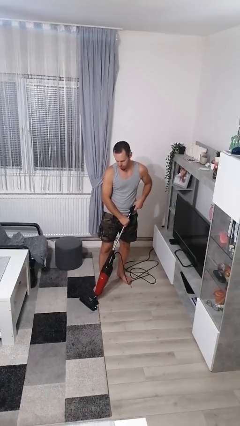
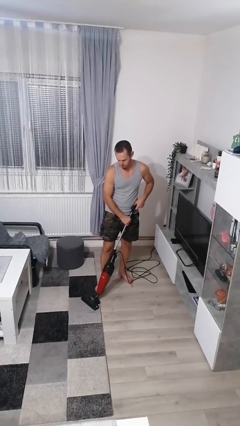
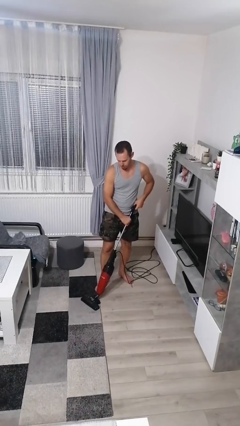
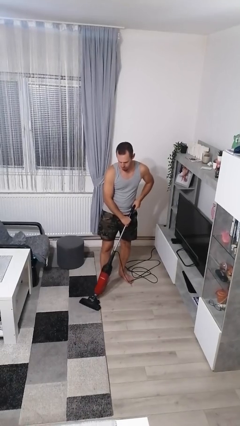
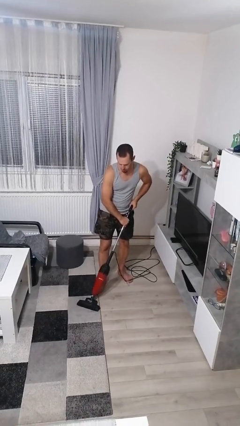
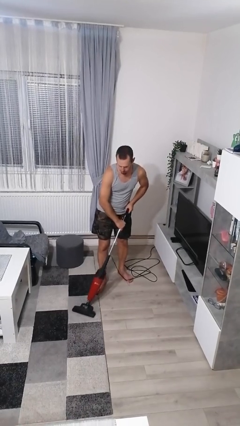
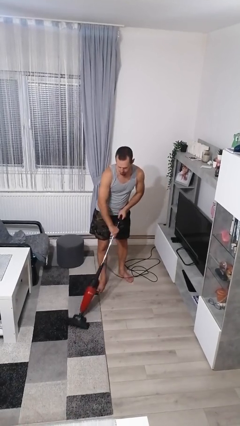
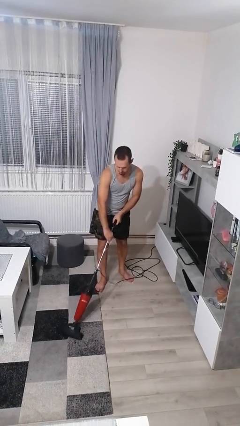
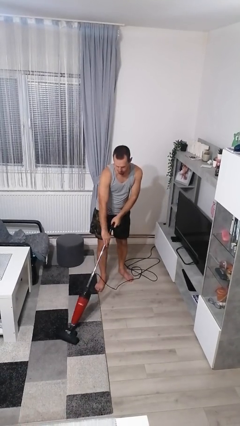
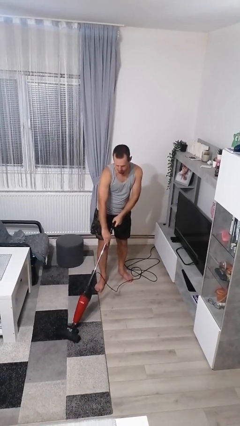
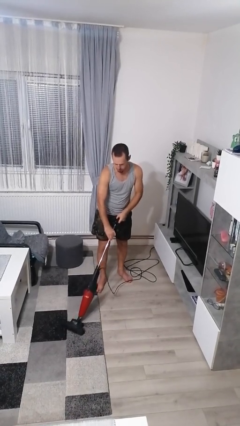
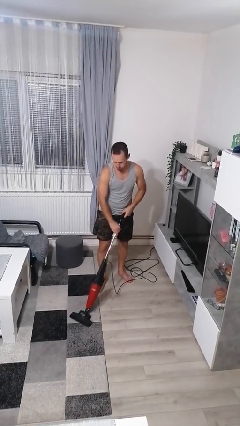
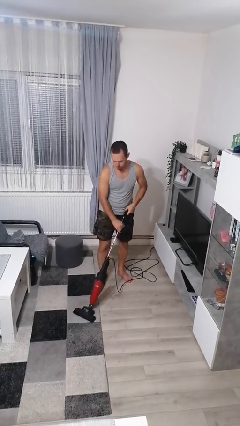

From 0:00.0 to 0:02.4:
person vacuums carpet

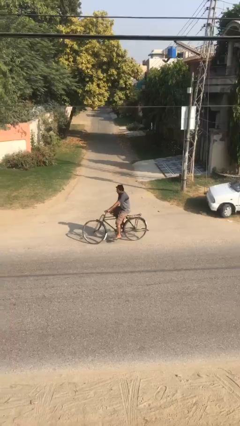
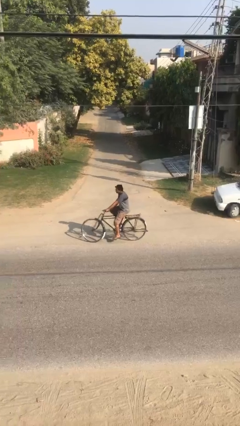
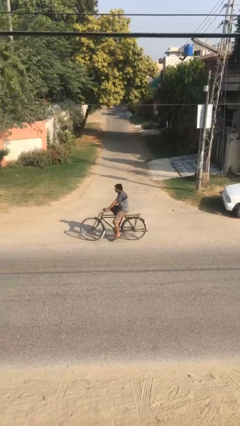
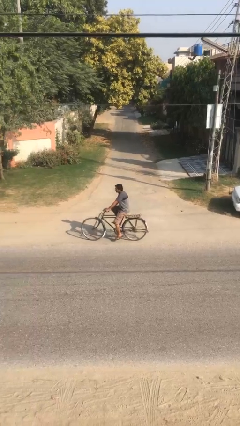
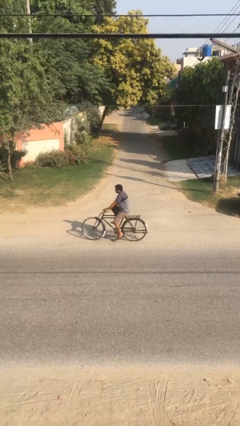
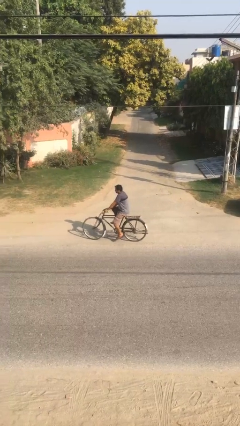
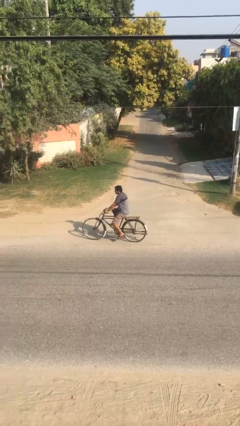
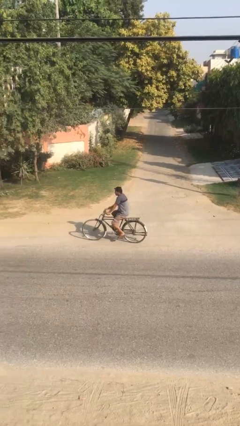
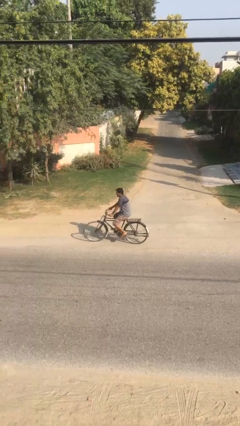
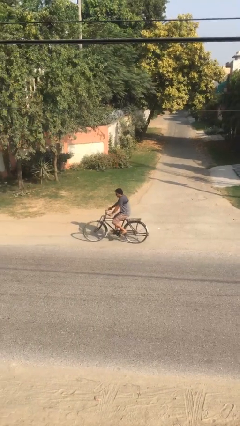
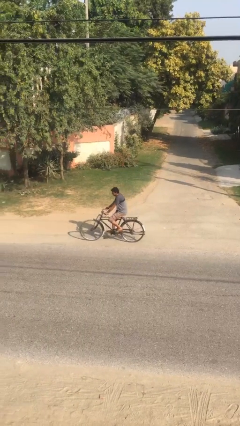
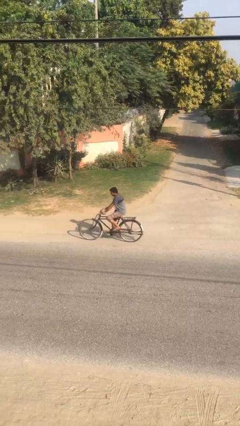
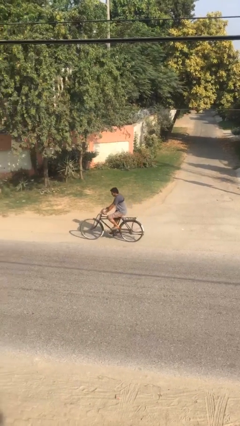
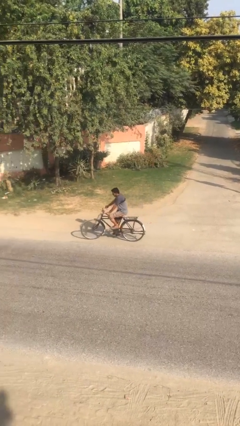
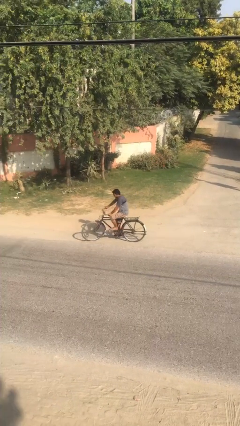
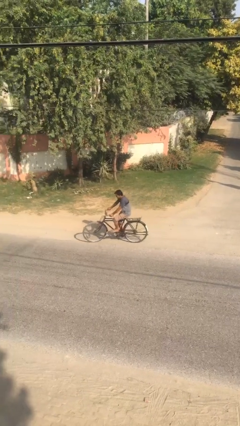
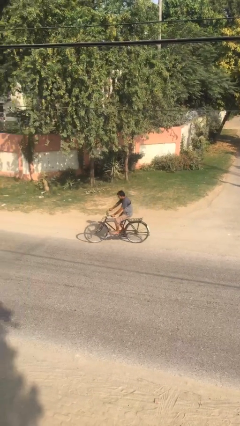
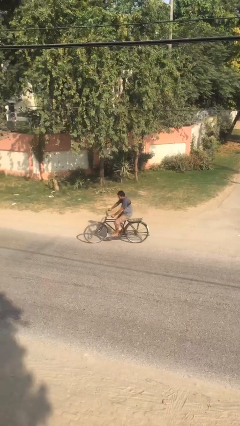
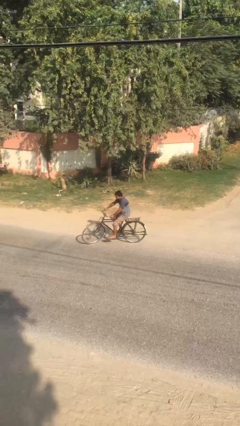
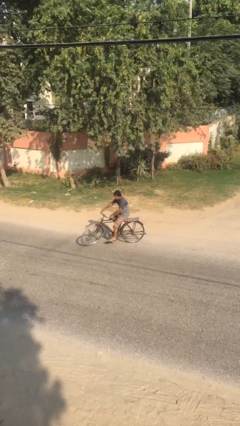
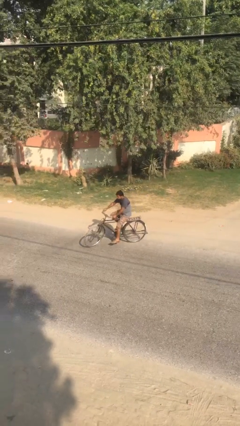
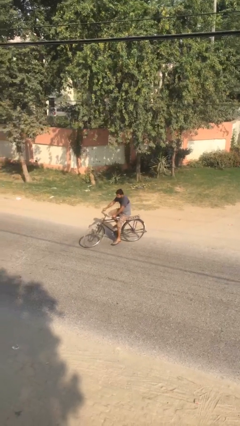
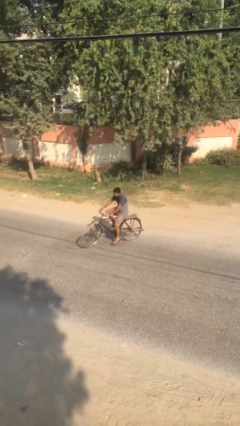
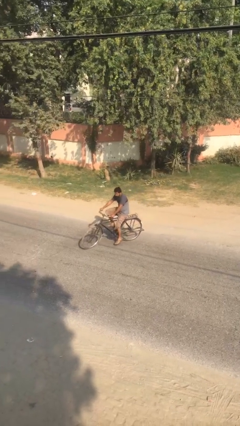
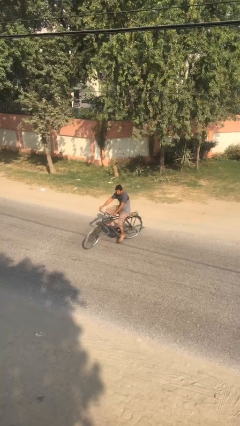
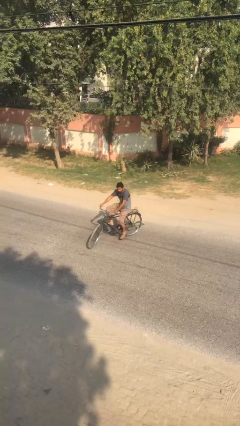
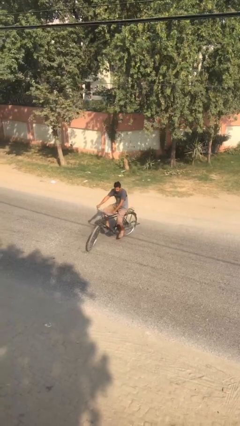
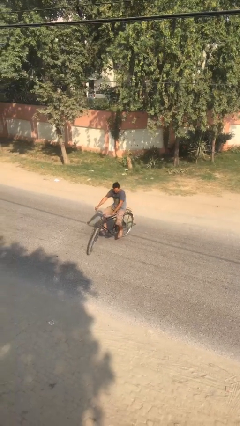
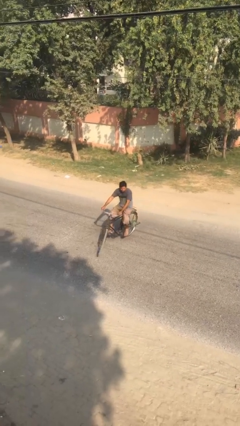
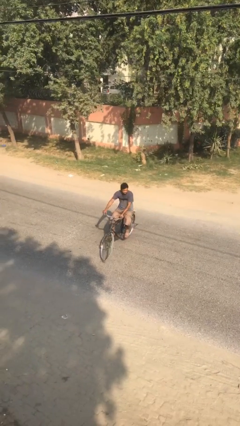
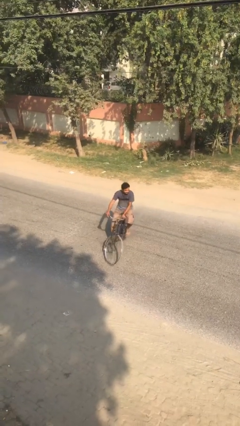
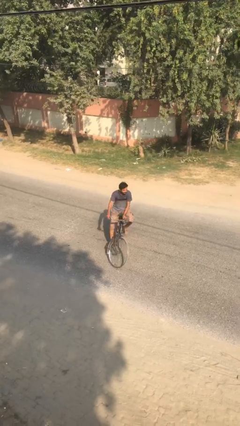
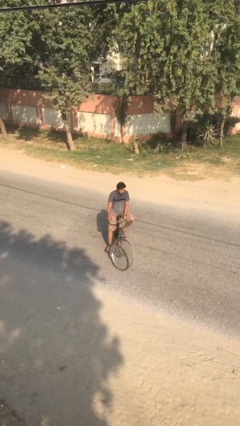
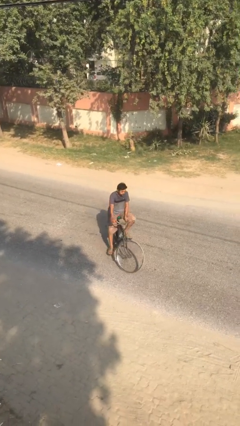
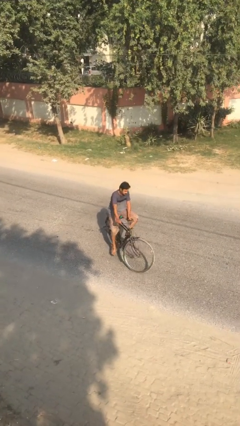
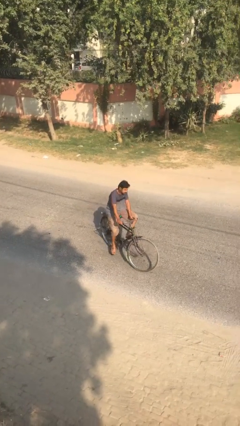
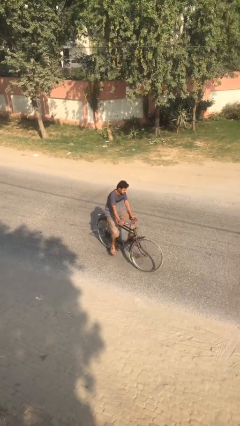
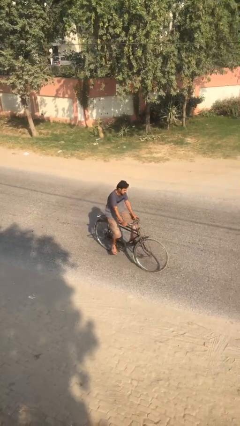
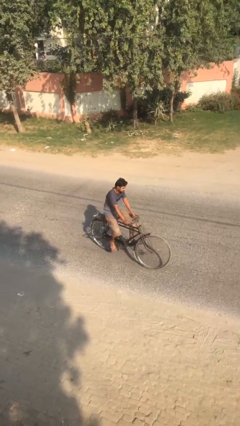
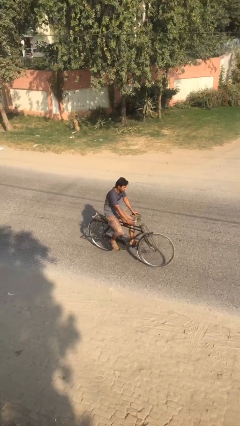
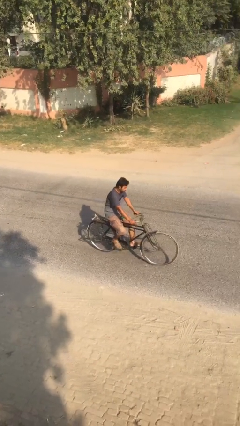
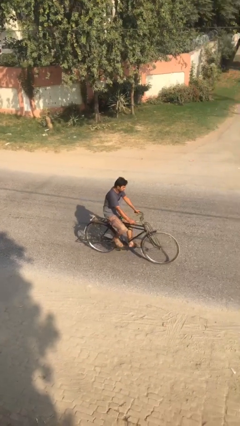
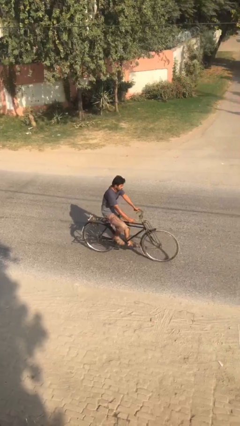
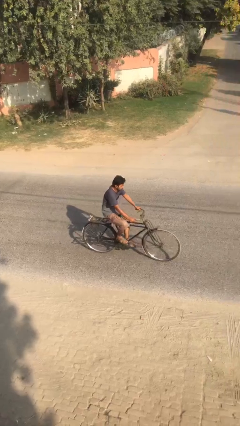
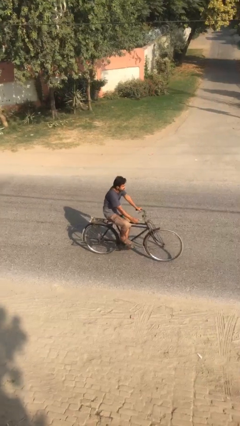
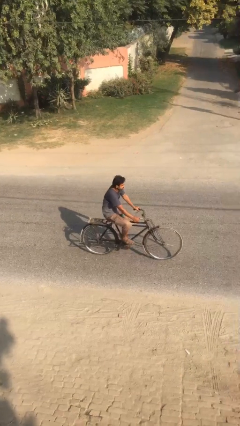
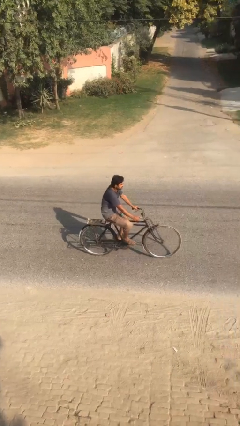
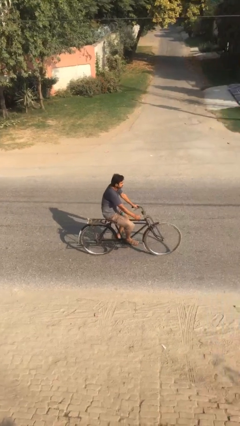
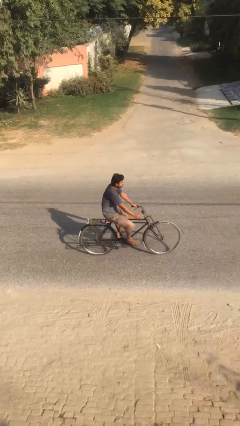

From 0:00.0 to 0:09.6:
person rides bicycle

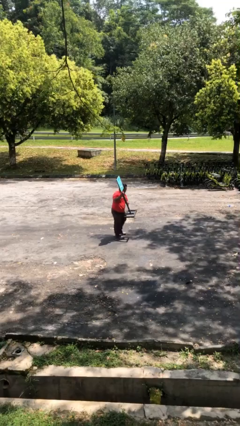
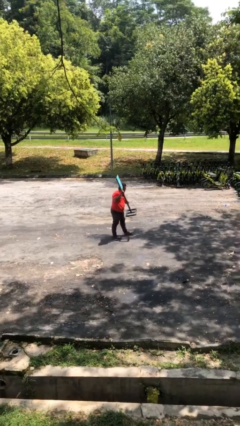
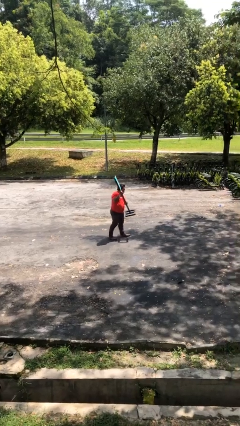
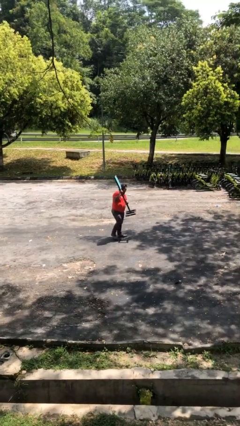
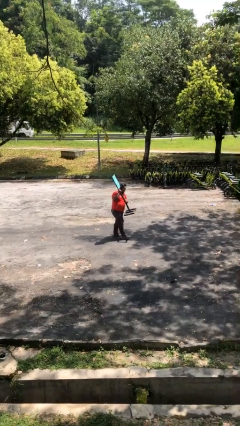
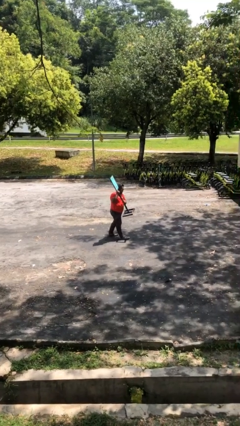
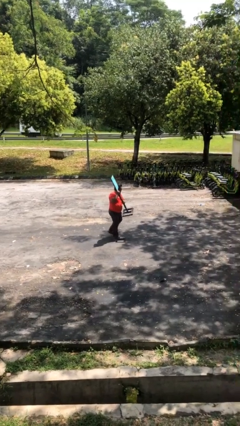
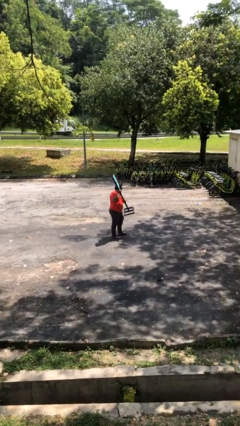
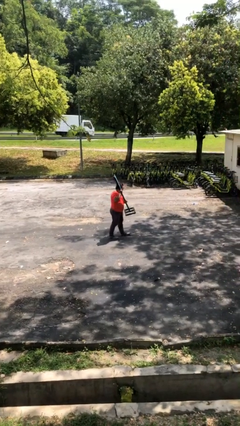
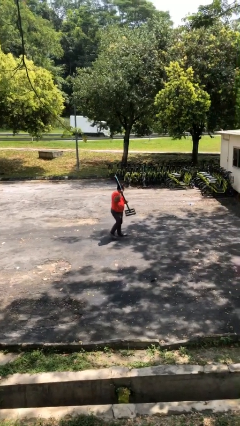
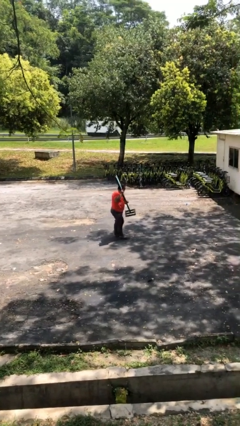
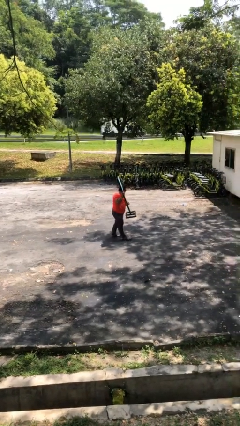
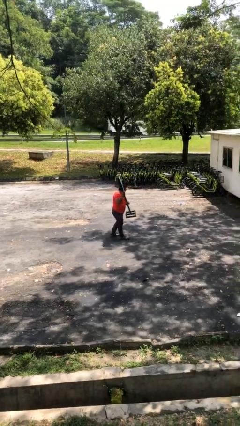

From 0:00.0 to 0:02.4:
person carries heavy object

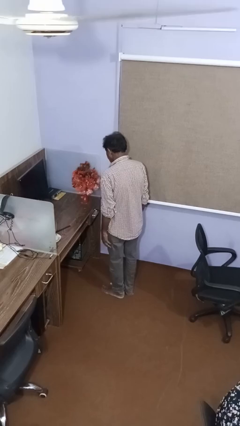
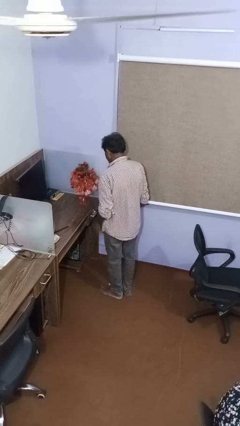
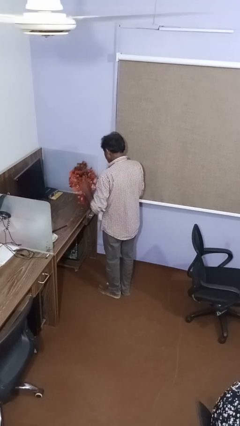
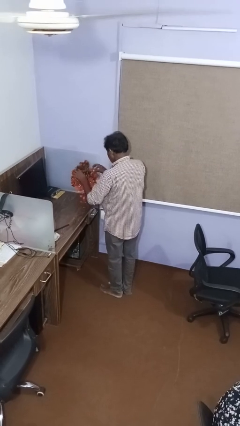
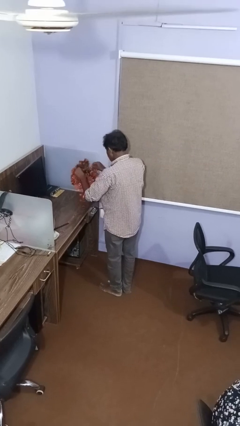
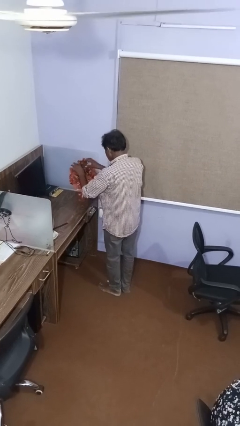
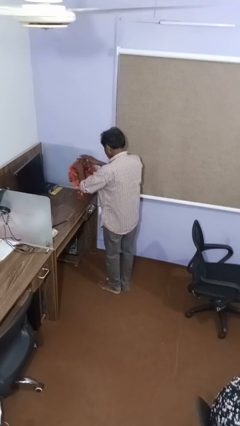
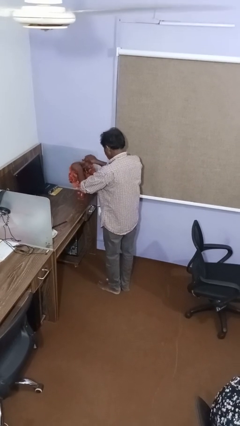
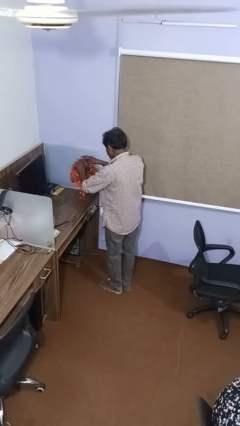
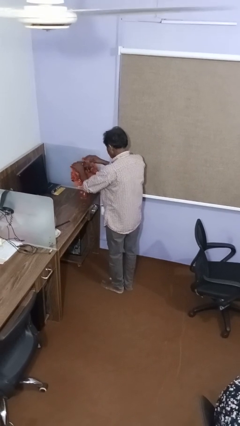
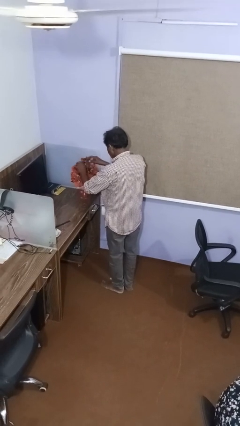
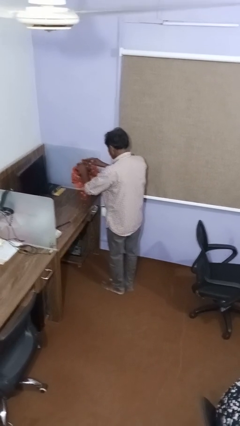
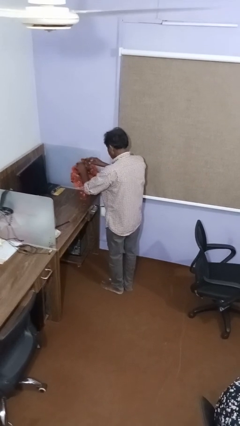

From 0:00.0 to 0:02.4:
person arranges flowers in vase

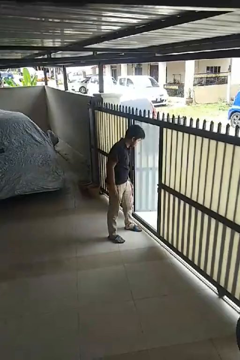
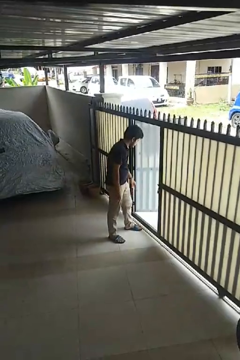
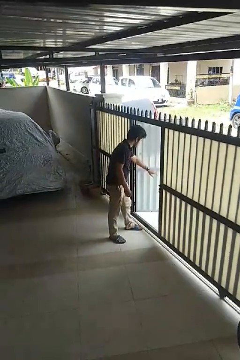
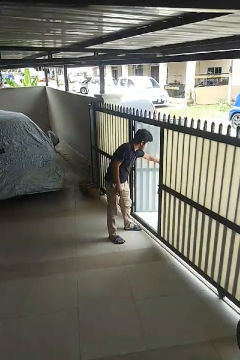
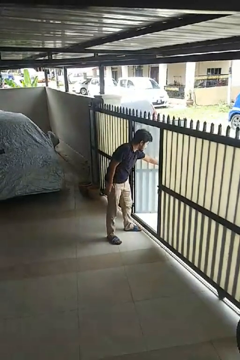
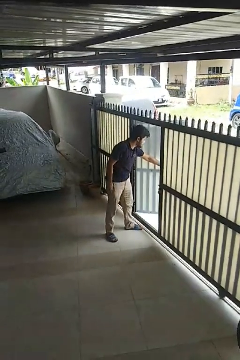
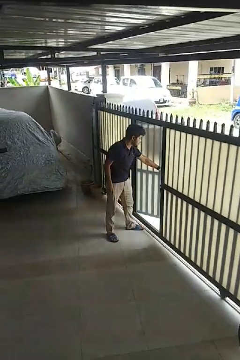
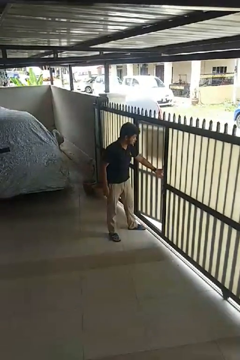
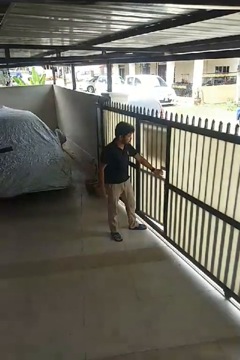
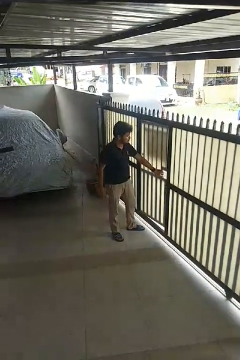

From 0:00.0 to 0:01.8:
person closes gate
